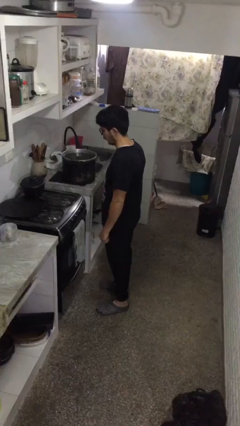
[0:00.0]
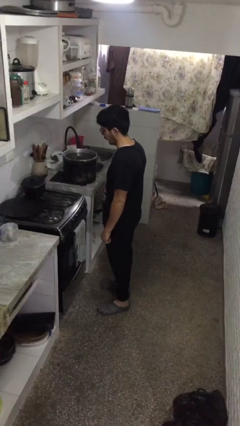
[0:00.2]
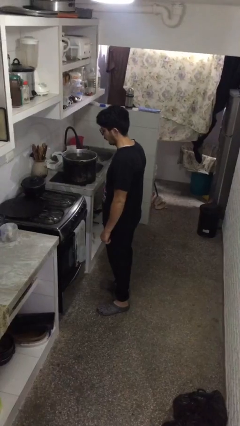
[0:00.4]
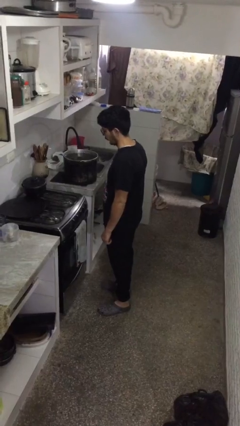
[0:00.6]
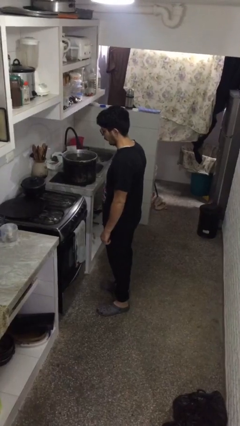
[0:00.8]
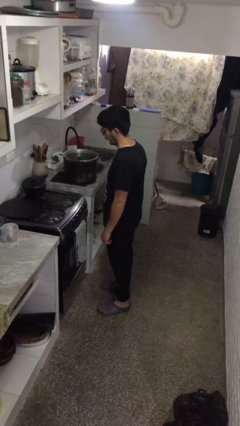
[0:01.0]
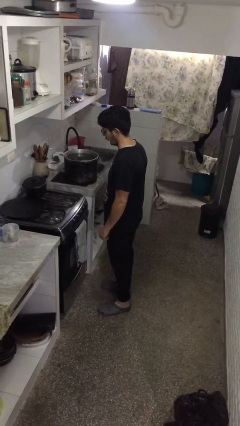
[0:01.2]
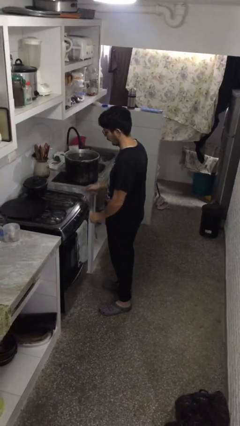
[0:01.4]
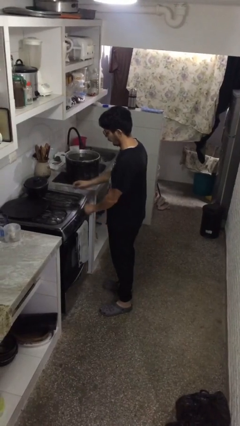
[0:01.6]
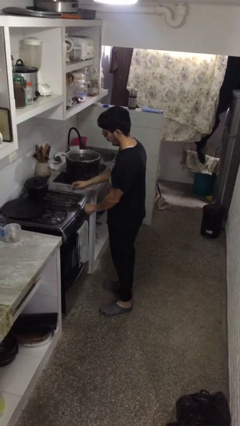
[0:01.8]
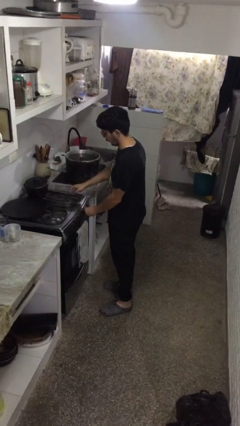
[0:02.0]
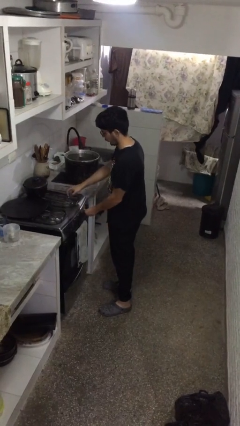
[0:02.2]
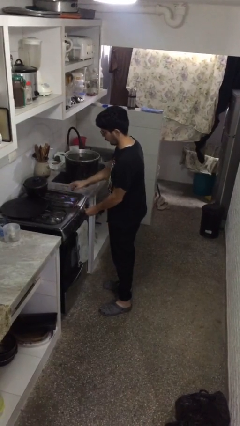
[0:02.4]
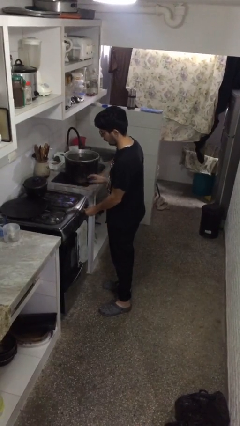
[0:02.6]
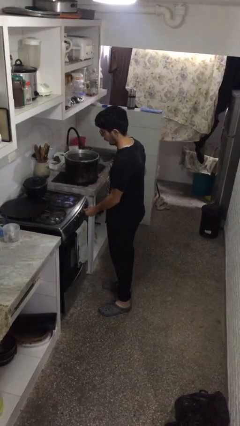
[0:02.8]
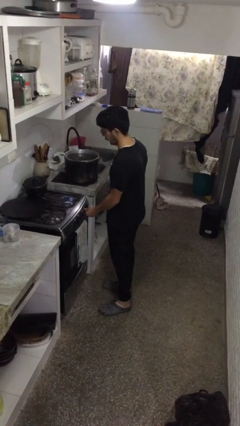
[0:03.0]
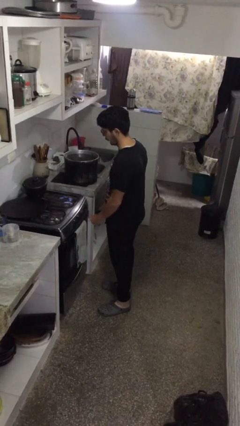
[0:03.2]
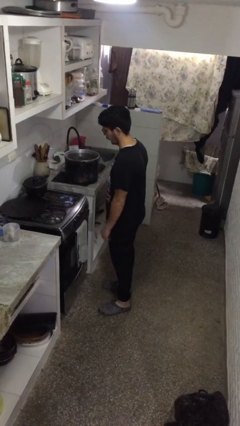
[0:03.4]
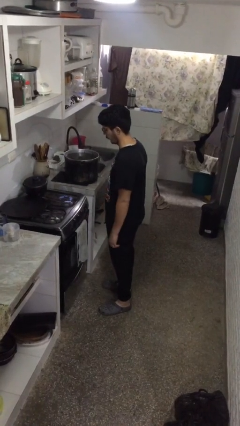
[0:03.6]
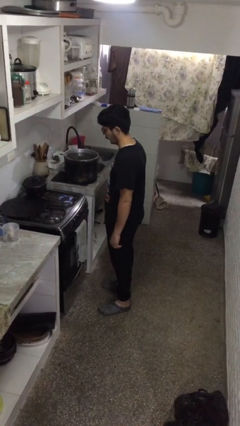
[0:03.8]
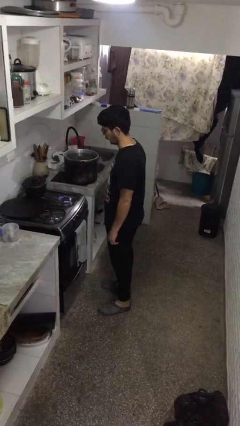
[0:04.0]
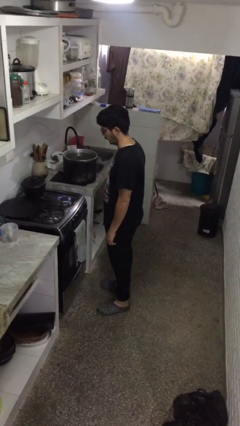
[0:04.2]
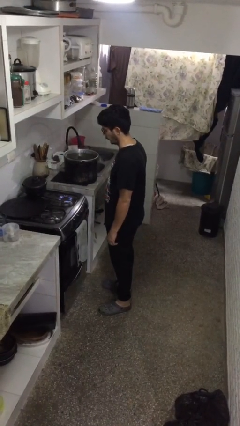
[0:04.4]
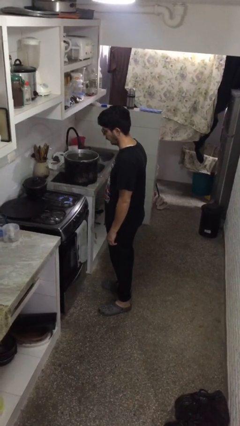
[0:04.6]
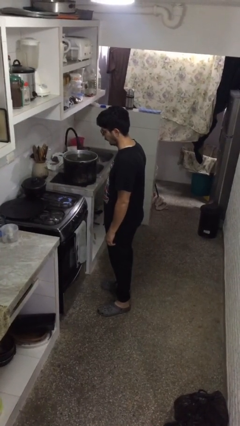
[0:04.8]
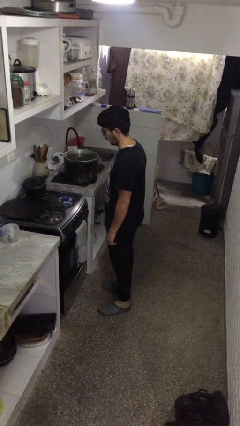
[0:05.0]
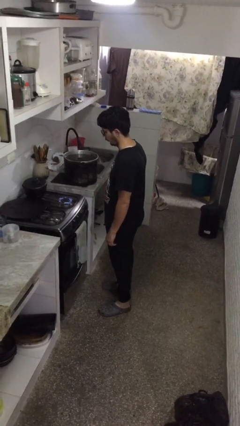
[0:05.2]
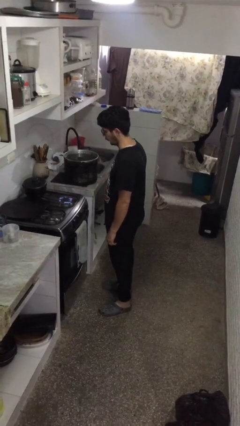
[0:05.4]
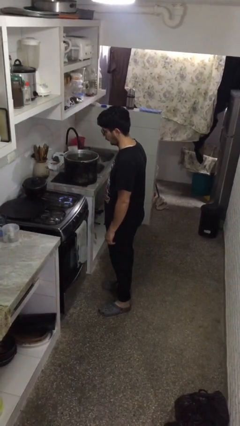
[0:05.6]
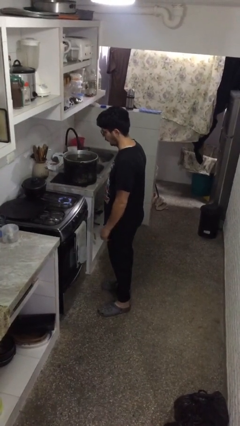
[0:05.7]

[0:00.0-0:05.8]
person turns on stovetop

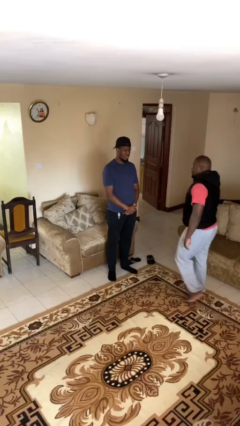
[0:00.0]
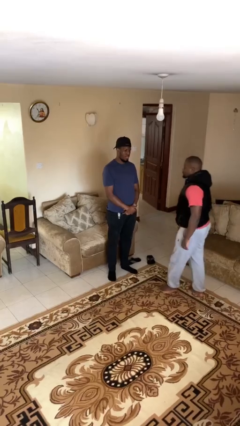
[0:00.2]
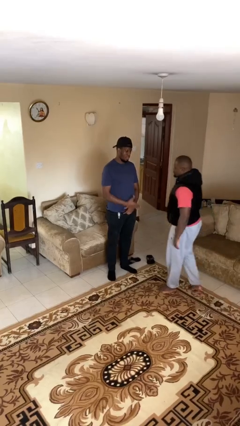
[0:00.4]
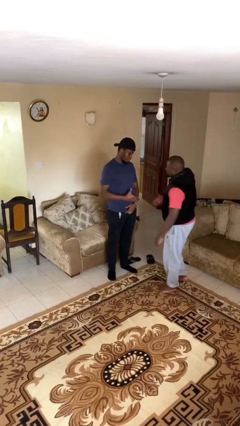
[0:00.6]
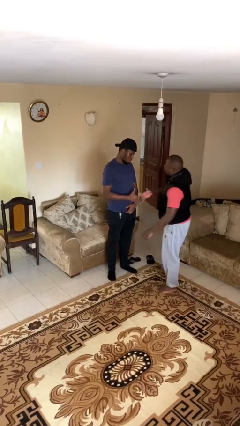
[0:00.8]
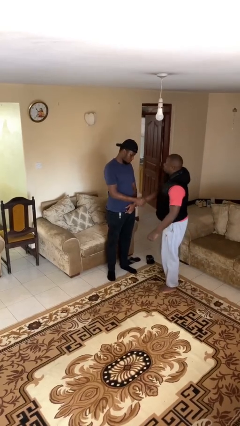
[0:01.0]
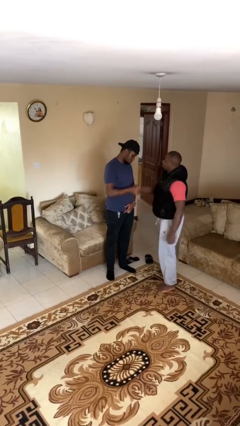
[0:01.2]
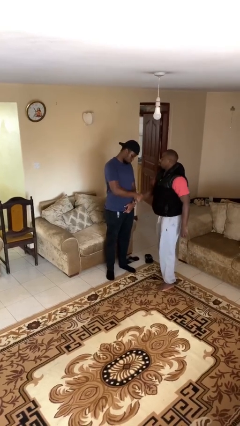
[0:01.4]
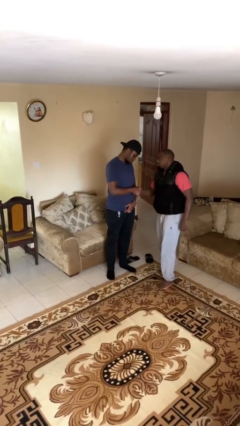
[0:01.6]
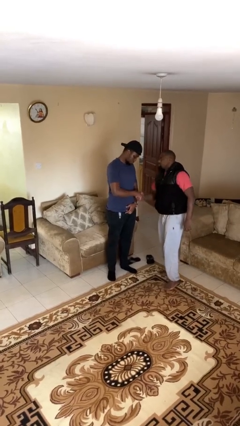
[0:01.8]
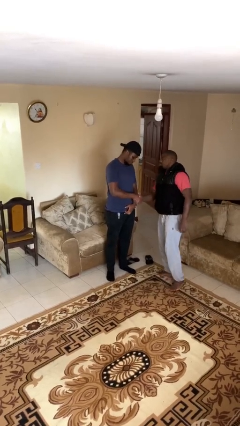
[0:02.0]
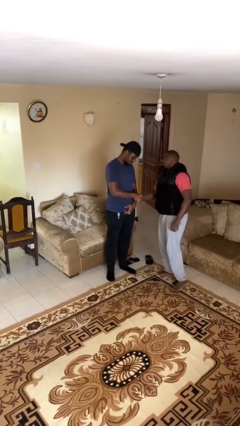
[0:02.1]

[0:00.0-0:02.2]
person shakes hand

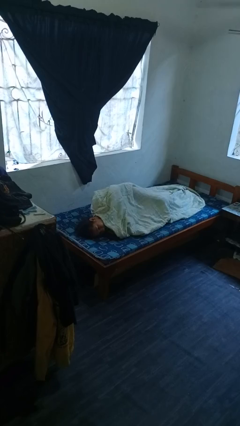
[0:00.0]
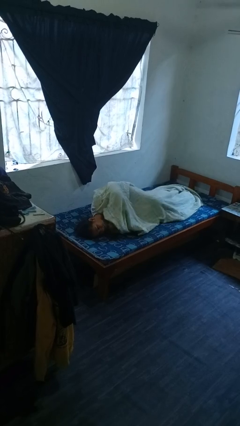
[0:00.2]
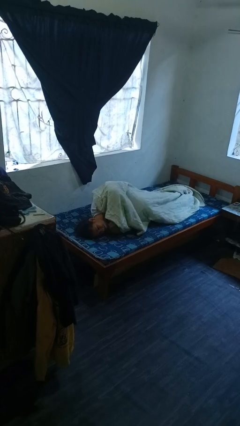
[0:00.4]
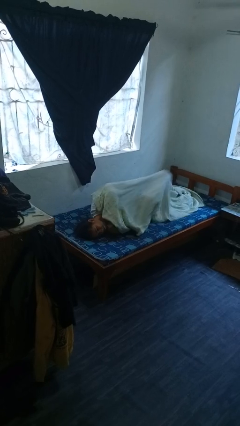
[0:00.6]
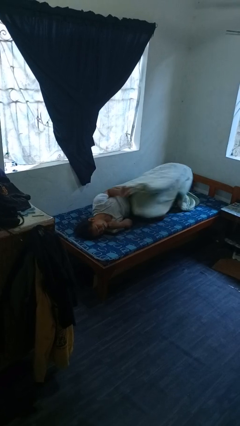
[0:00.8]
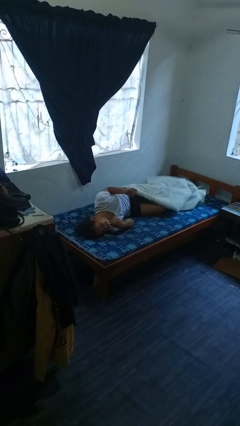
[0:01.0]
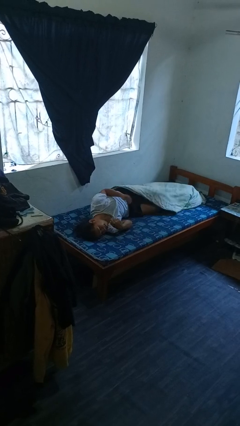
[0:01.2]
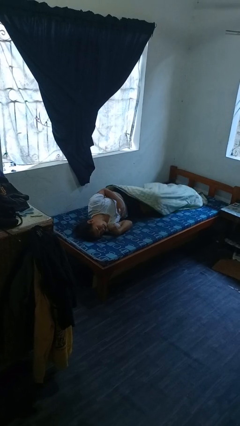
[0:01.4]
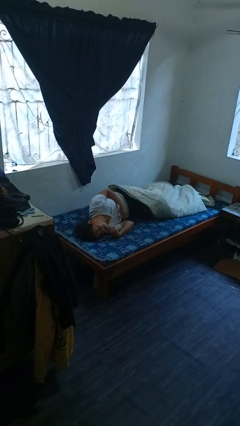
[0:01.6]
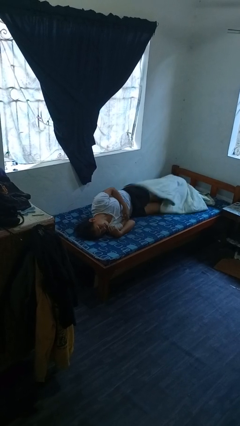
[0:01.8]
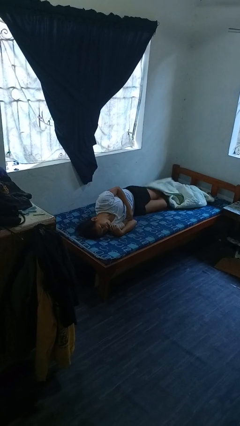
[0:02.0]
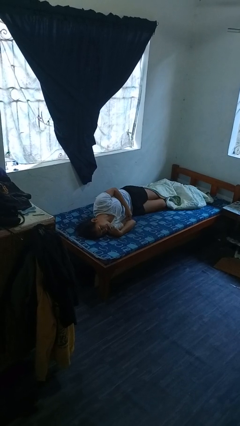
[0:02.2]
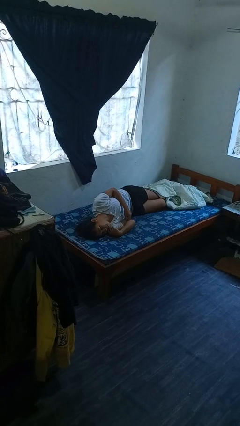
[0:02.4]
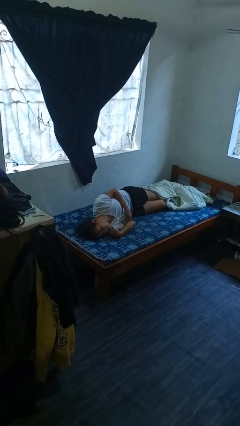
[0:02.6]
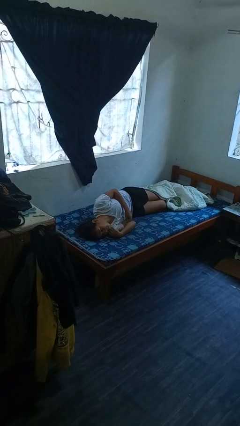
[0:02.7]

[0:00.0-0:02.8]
person uncovers with bedsheets

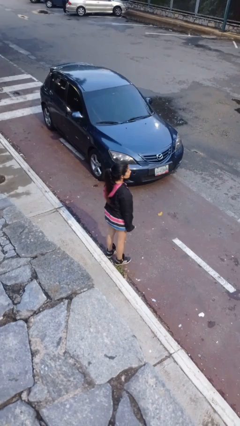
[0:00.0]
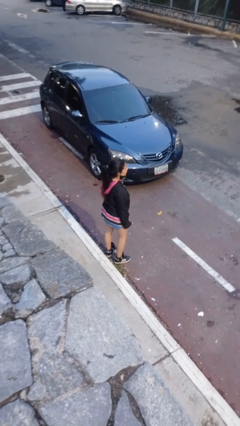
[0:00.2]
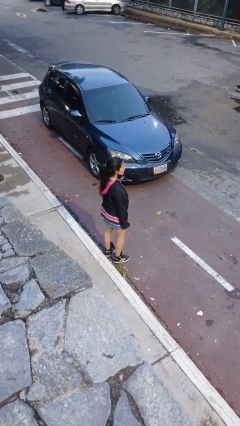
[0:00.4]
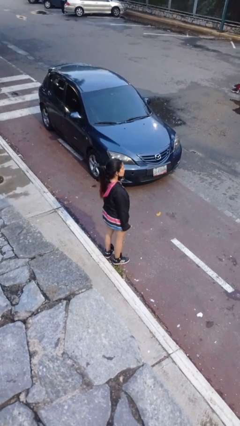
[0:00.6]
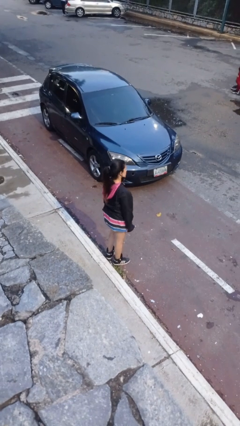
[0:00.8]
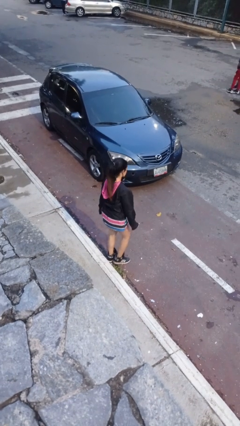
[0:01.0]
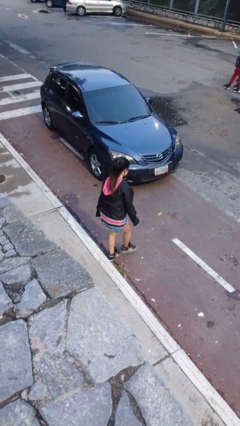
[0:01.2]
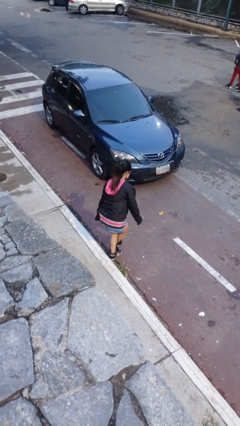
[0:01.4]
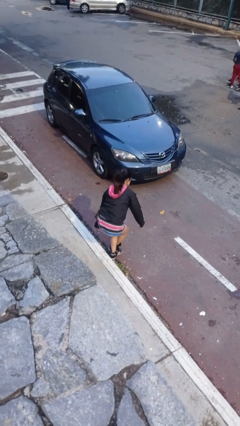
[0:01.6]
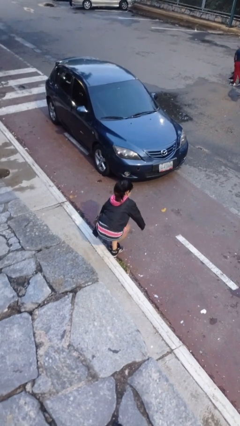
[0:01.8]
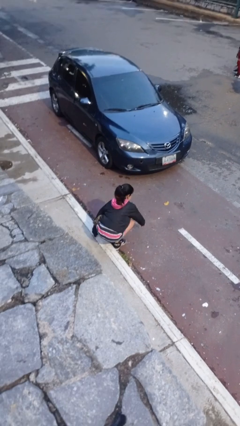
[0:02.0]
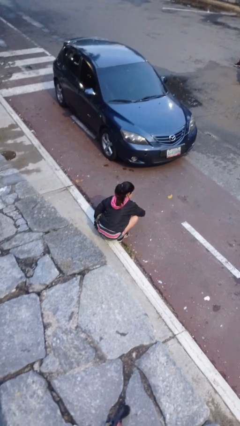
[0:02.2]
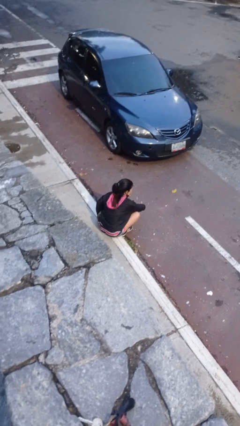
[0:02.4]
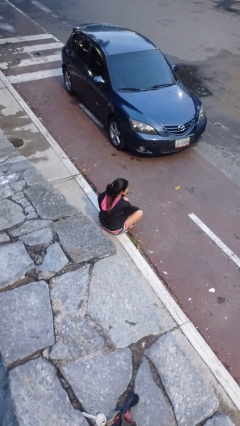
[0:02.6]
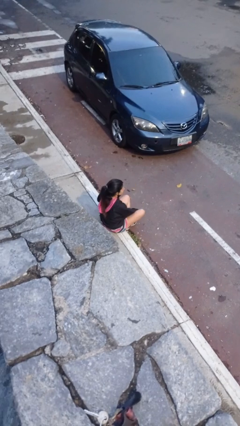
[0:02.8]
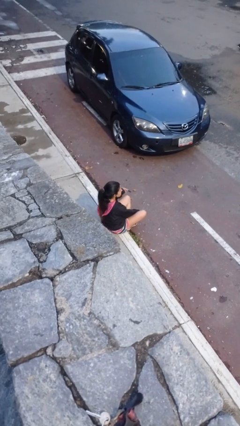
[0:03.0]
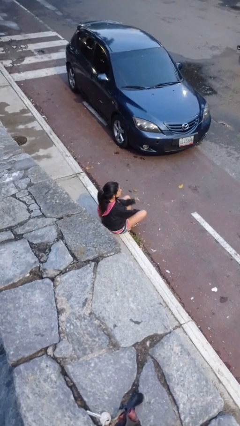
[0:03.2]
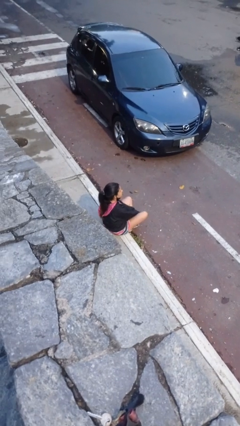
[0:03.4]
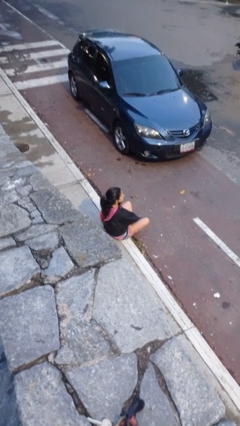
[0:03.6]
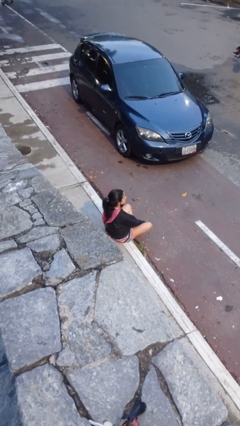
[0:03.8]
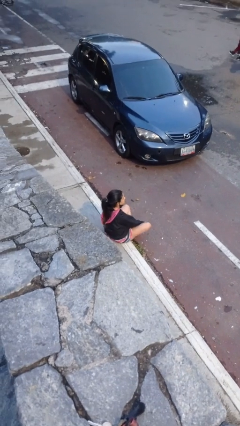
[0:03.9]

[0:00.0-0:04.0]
person sits crisscross

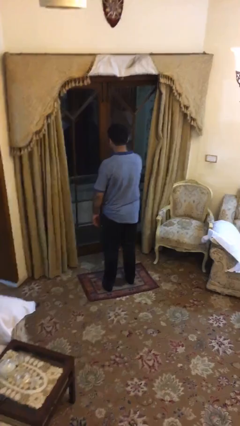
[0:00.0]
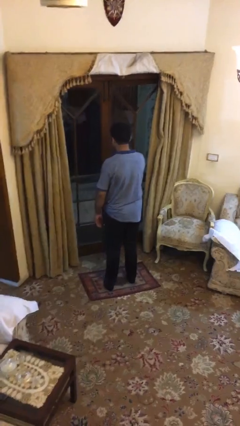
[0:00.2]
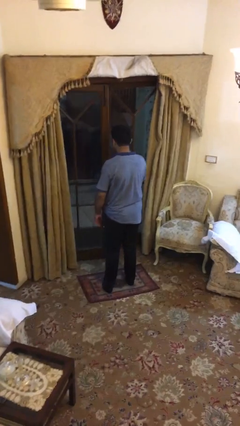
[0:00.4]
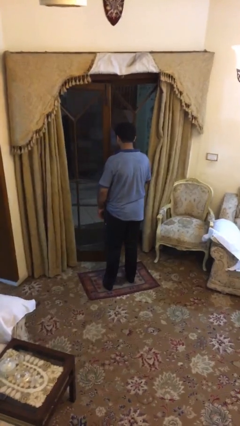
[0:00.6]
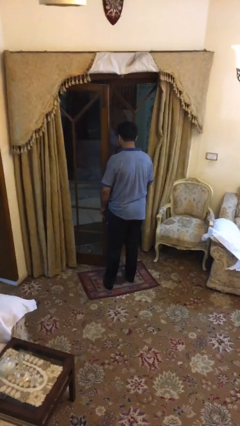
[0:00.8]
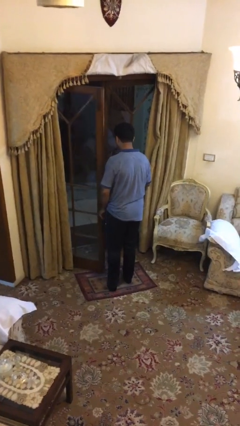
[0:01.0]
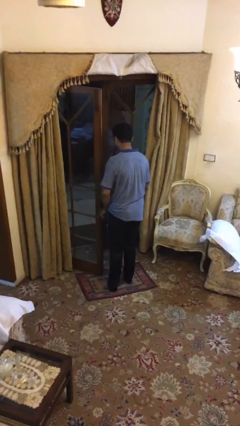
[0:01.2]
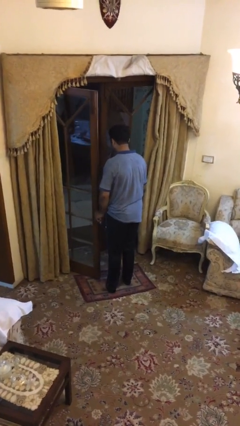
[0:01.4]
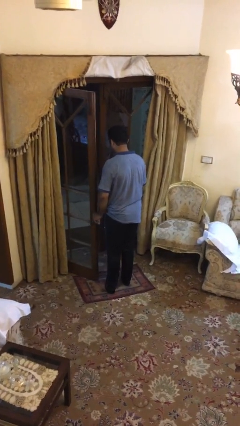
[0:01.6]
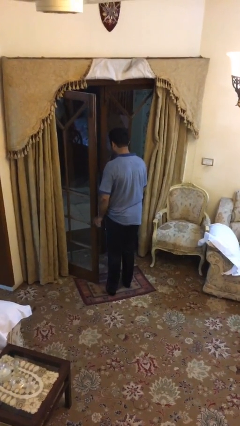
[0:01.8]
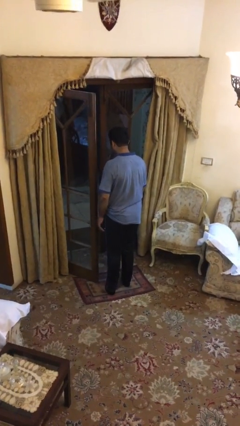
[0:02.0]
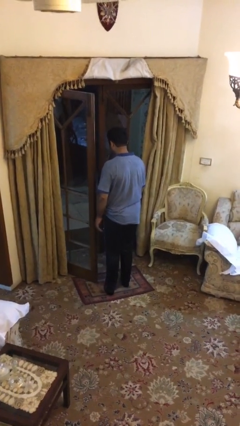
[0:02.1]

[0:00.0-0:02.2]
person opens facility door

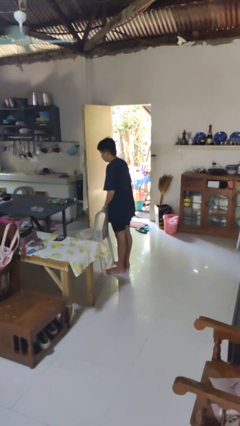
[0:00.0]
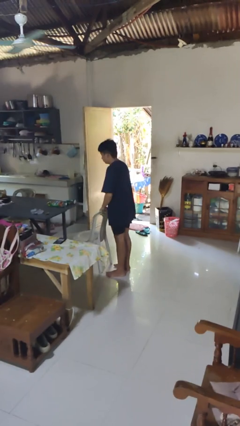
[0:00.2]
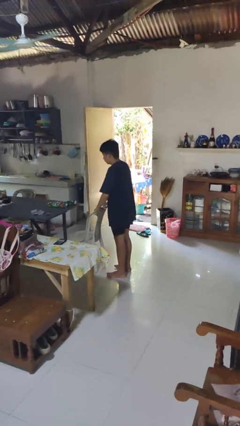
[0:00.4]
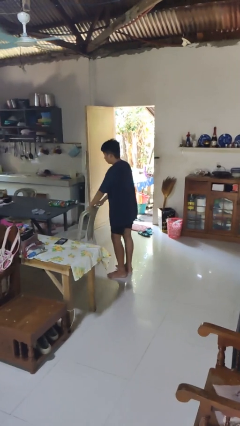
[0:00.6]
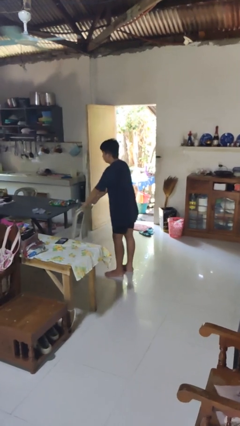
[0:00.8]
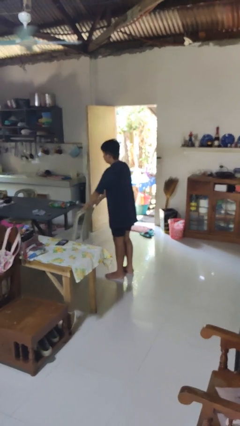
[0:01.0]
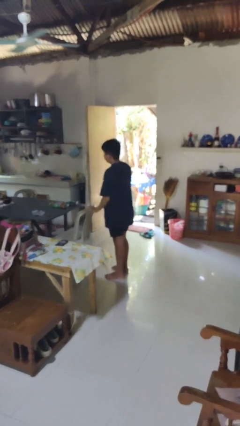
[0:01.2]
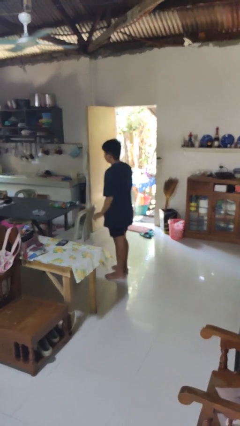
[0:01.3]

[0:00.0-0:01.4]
person pushes in chair
